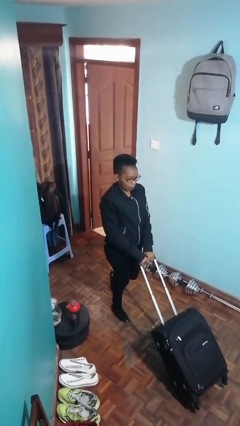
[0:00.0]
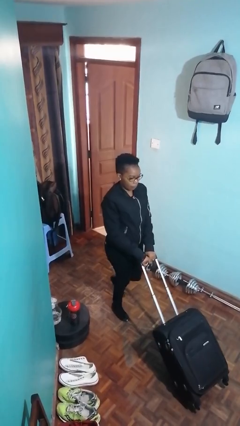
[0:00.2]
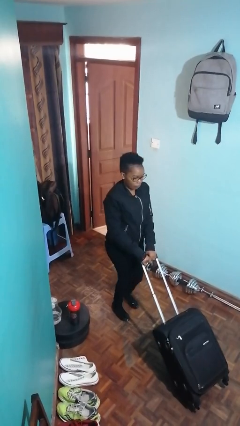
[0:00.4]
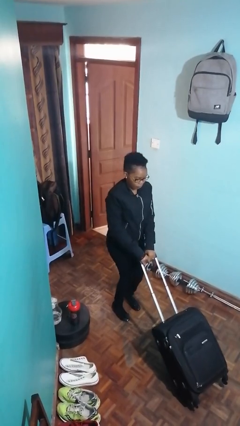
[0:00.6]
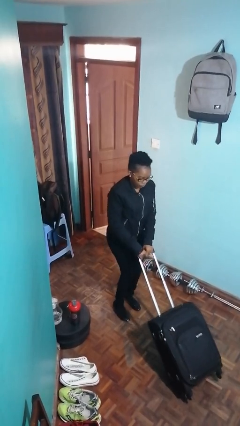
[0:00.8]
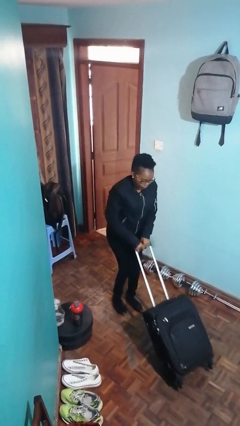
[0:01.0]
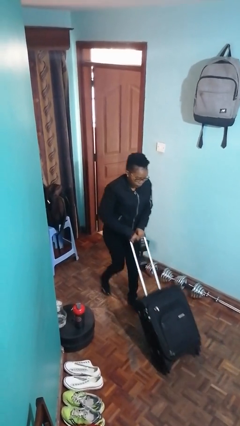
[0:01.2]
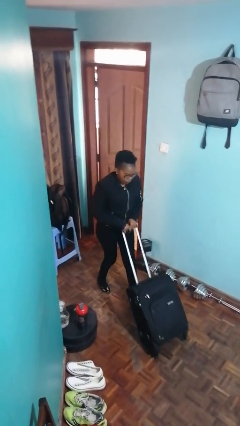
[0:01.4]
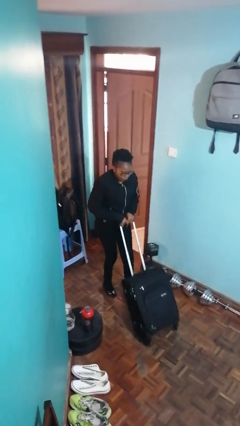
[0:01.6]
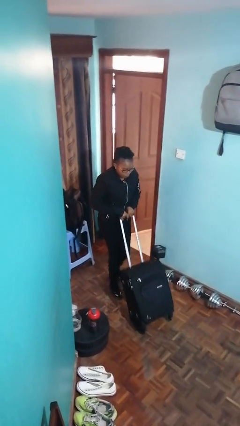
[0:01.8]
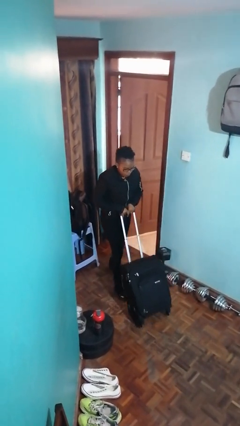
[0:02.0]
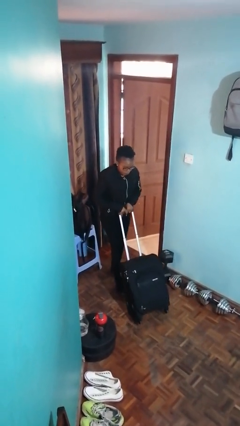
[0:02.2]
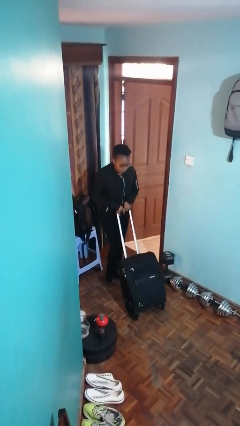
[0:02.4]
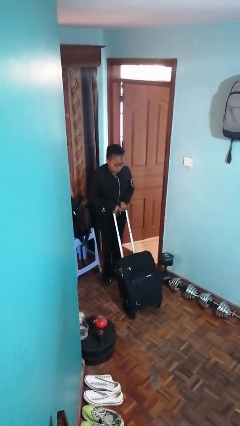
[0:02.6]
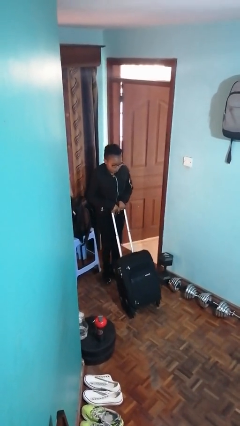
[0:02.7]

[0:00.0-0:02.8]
person pulls wheeled cart

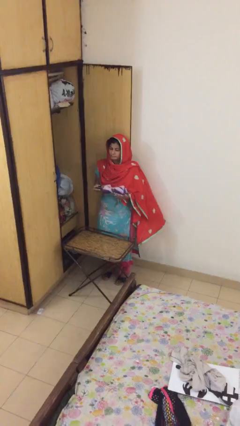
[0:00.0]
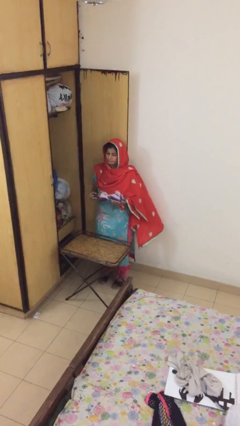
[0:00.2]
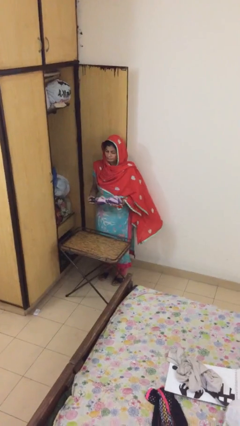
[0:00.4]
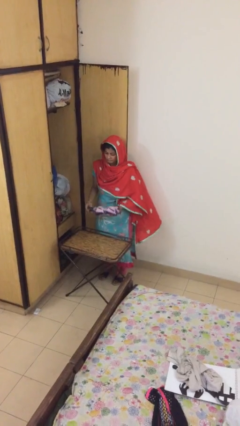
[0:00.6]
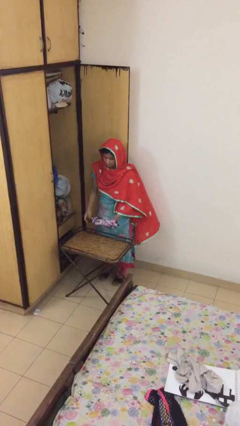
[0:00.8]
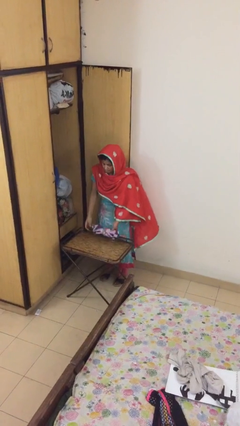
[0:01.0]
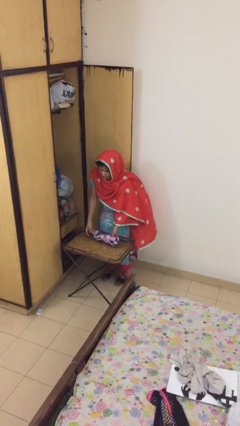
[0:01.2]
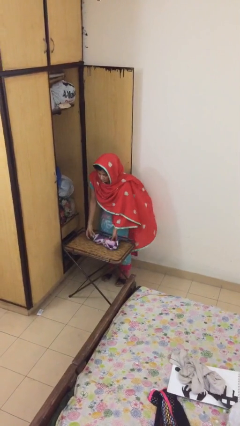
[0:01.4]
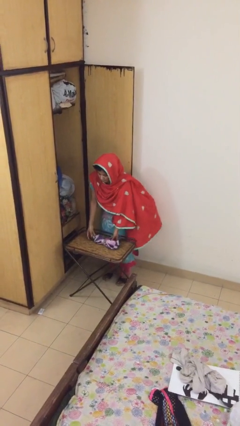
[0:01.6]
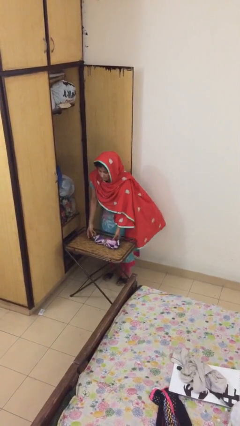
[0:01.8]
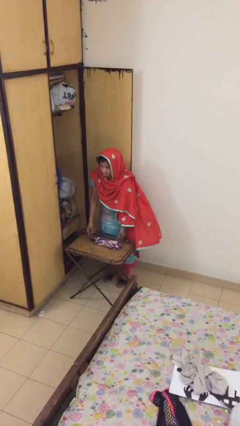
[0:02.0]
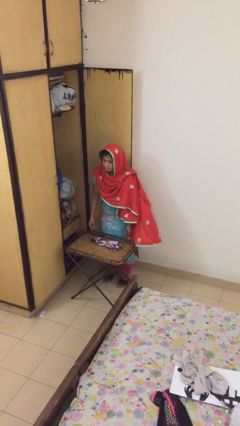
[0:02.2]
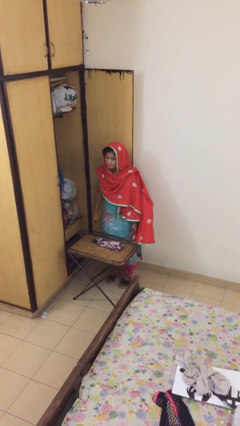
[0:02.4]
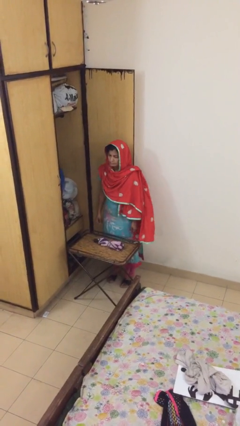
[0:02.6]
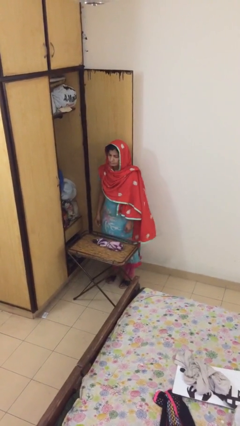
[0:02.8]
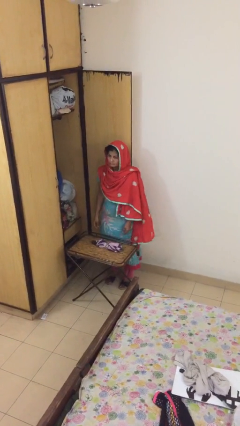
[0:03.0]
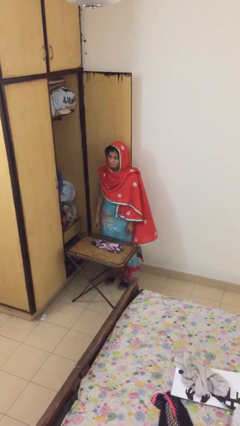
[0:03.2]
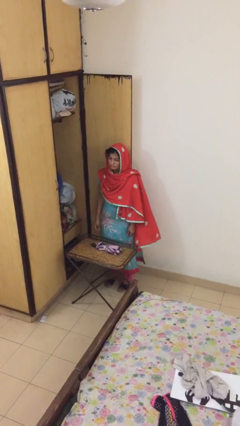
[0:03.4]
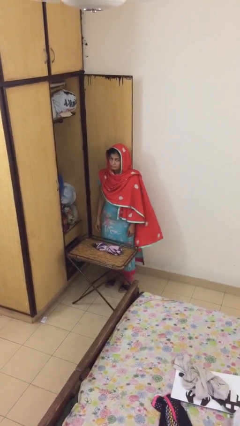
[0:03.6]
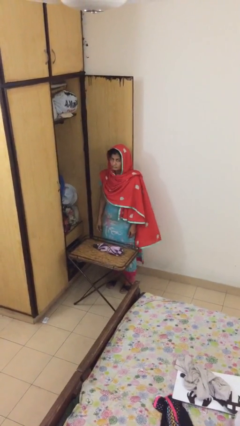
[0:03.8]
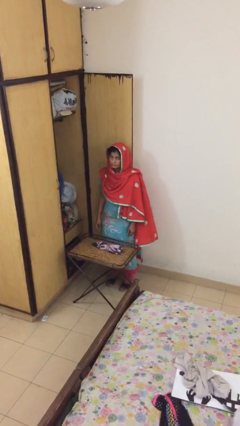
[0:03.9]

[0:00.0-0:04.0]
person puts down object on table

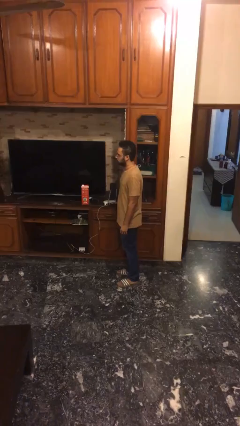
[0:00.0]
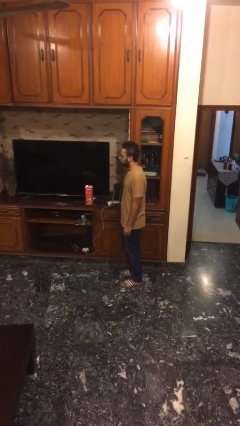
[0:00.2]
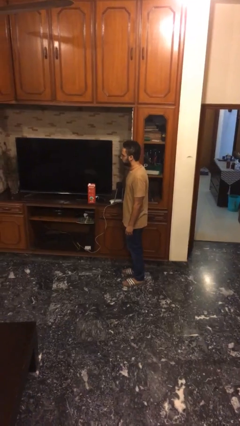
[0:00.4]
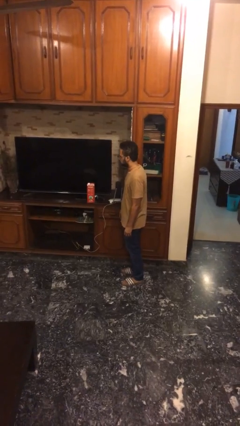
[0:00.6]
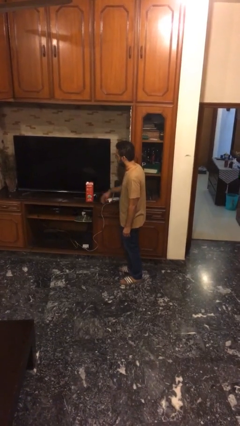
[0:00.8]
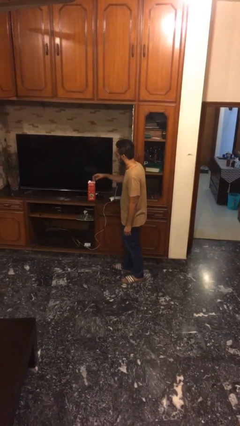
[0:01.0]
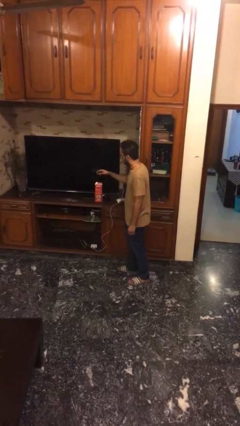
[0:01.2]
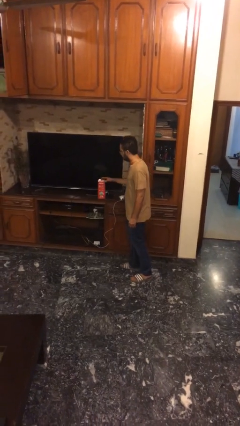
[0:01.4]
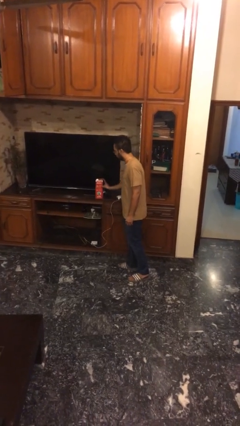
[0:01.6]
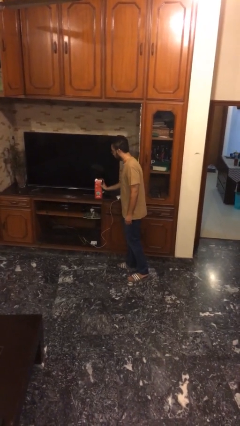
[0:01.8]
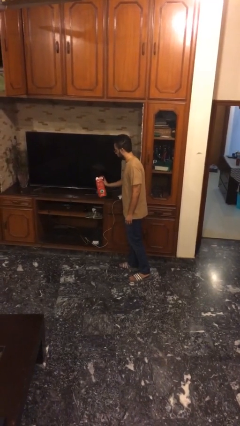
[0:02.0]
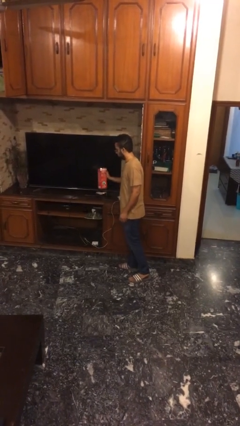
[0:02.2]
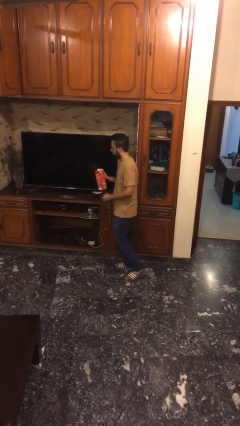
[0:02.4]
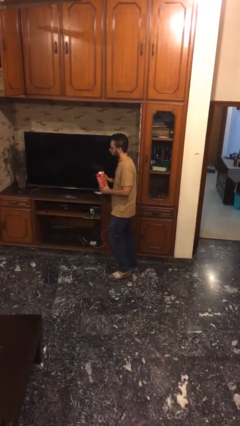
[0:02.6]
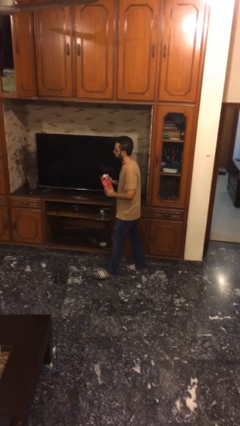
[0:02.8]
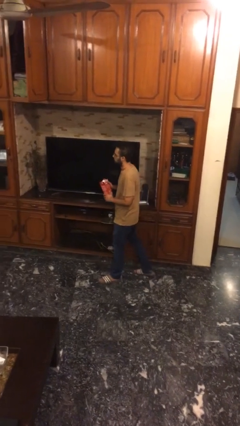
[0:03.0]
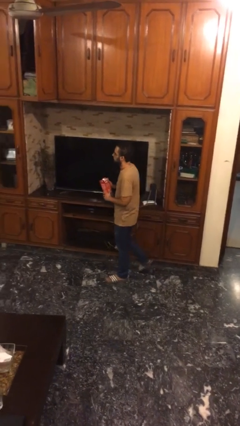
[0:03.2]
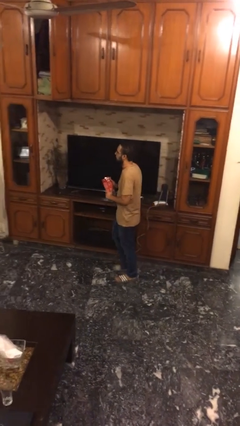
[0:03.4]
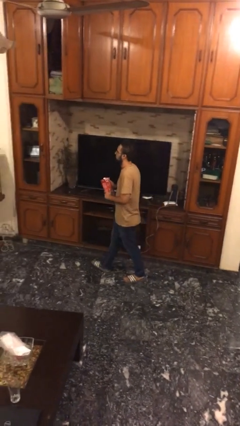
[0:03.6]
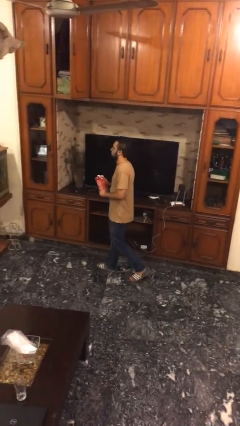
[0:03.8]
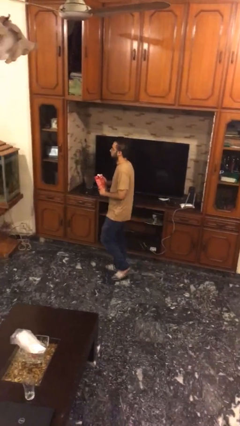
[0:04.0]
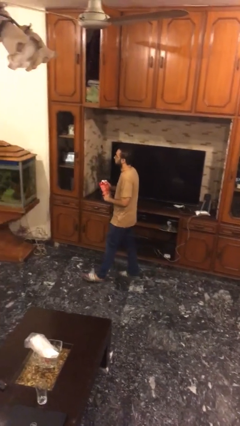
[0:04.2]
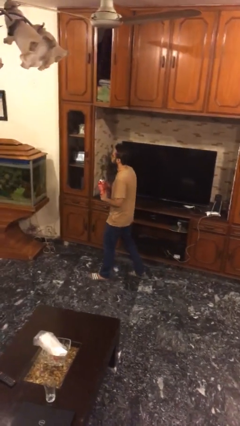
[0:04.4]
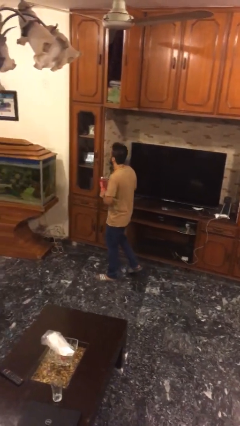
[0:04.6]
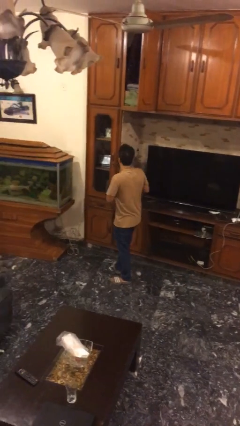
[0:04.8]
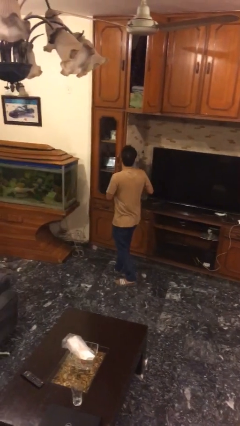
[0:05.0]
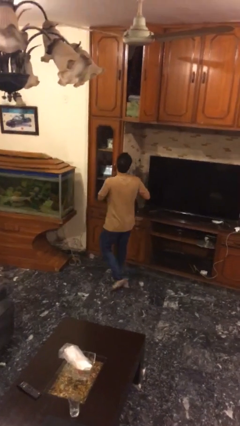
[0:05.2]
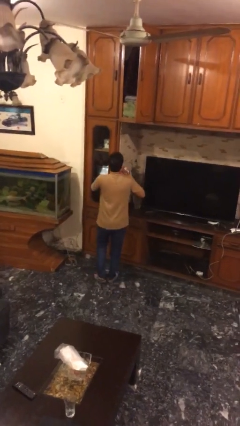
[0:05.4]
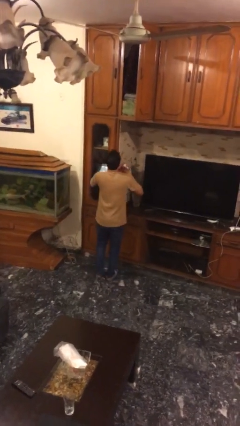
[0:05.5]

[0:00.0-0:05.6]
person picks up object from table

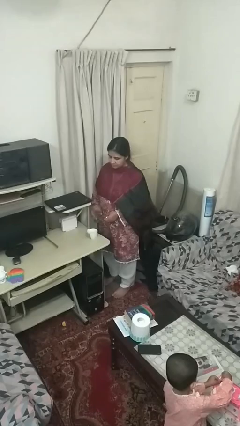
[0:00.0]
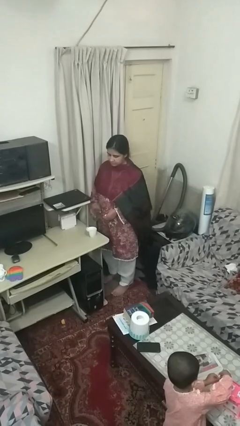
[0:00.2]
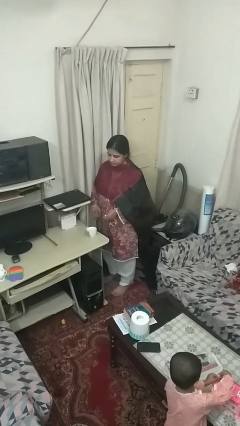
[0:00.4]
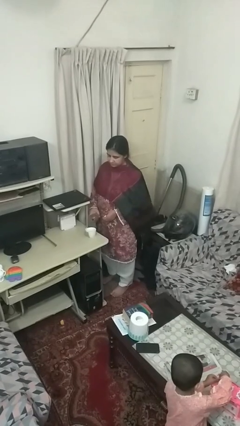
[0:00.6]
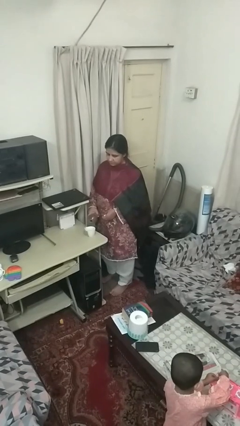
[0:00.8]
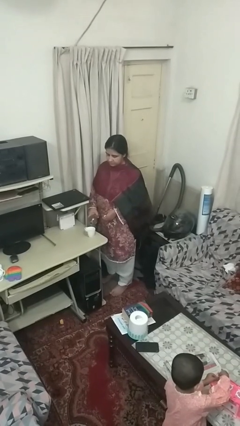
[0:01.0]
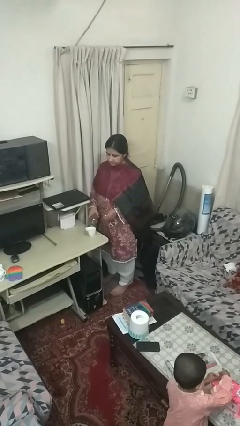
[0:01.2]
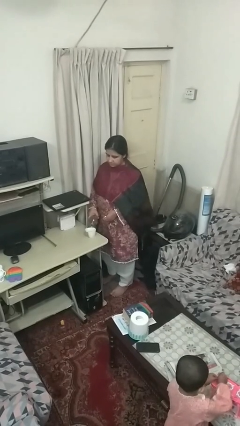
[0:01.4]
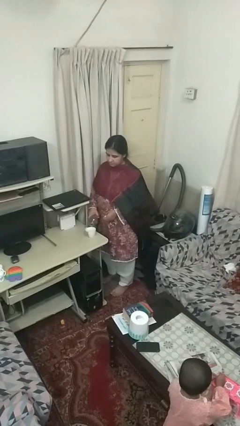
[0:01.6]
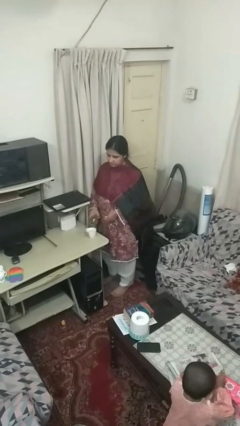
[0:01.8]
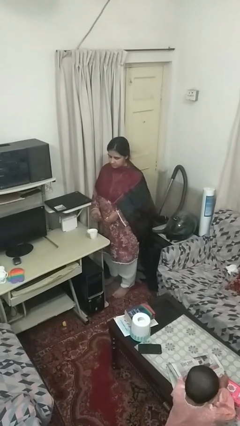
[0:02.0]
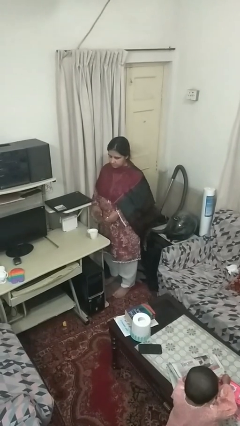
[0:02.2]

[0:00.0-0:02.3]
person pours liquid into cup

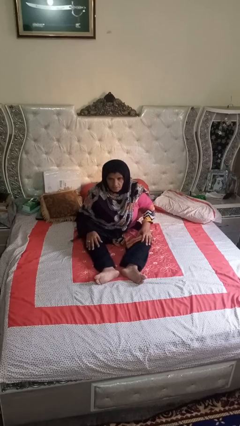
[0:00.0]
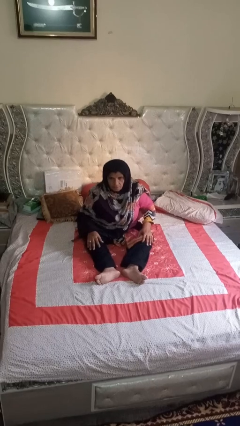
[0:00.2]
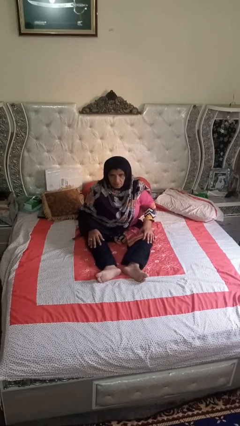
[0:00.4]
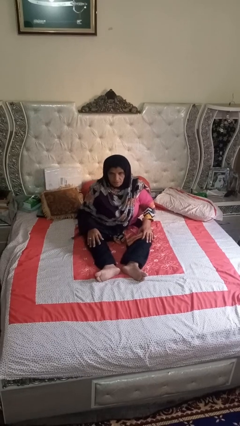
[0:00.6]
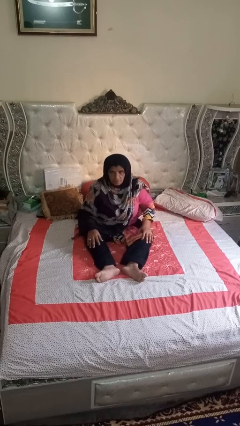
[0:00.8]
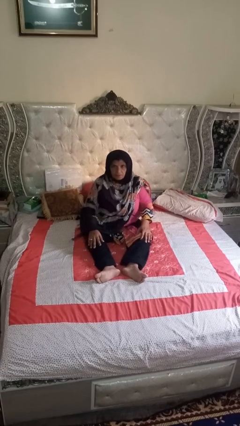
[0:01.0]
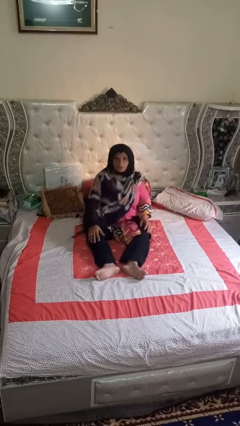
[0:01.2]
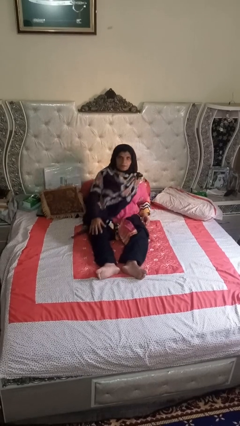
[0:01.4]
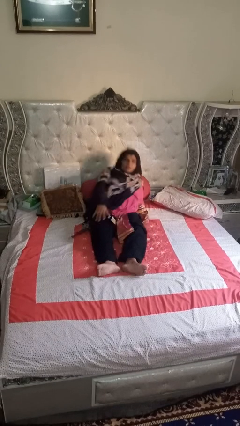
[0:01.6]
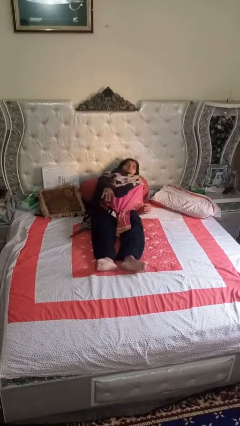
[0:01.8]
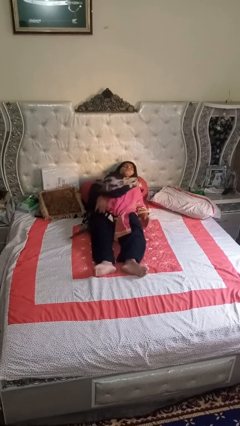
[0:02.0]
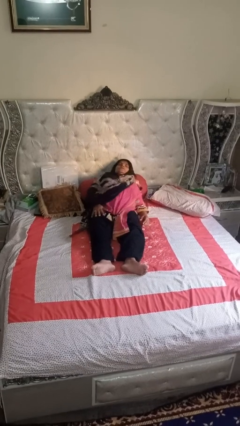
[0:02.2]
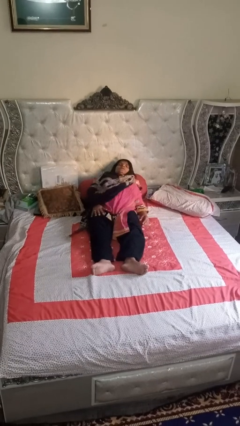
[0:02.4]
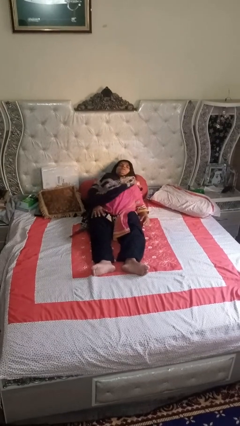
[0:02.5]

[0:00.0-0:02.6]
person lies down on bed

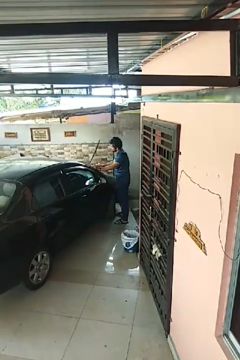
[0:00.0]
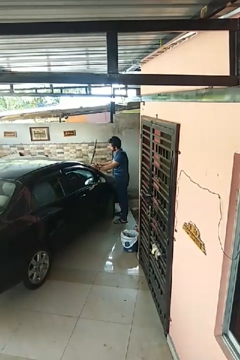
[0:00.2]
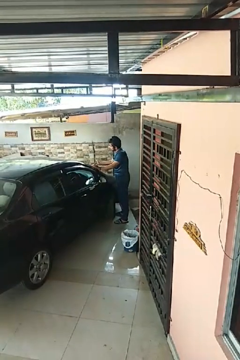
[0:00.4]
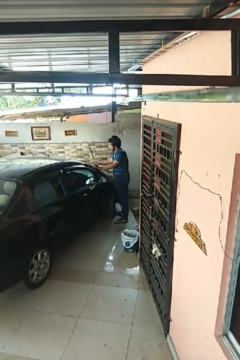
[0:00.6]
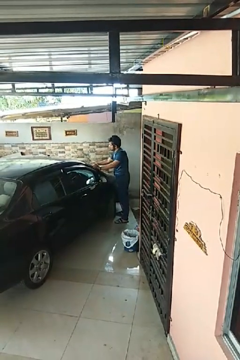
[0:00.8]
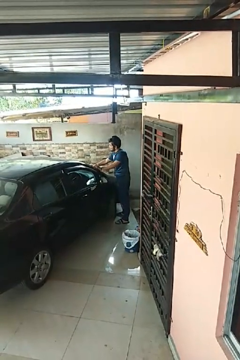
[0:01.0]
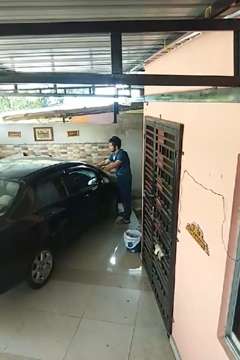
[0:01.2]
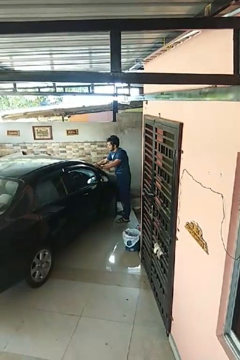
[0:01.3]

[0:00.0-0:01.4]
person flips down car wipers
